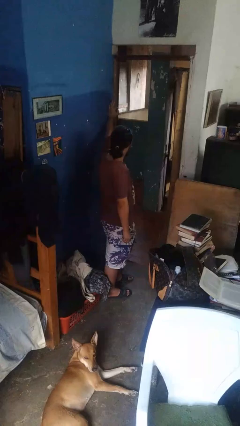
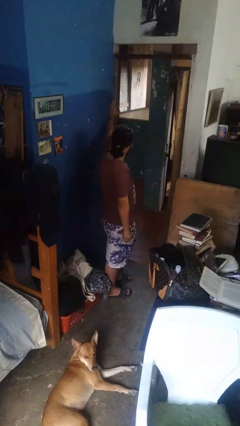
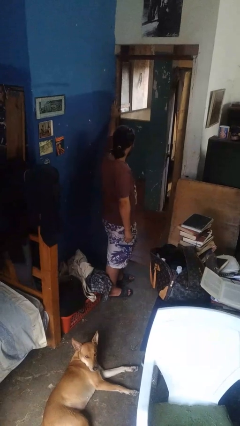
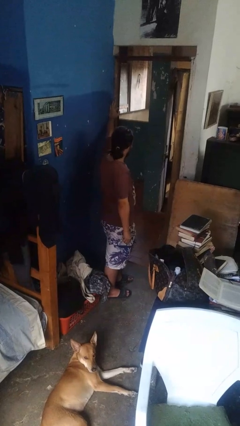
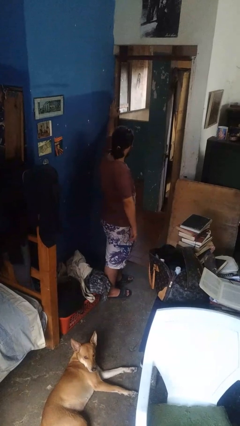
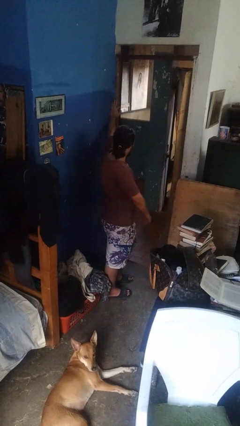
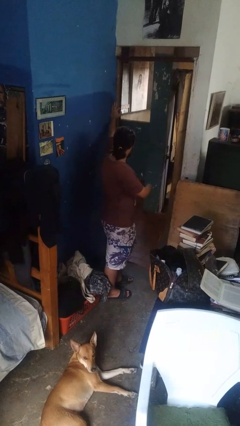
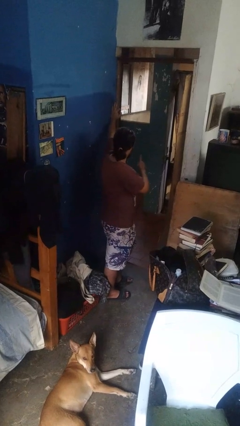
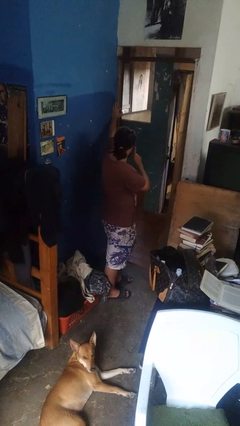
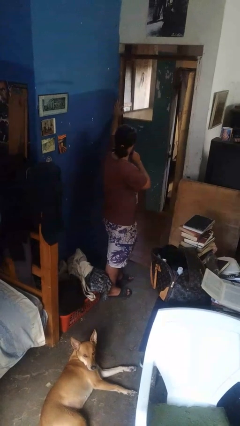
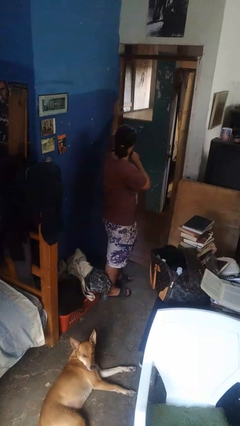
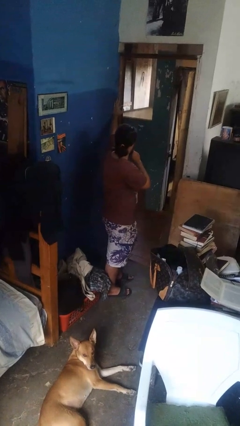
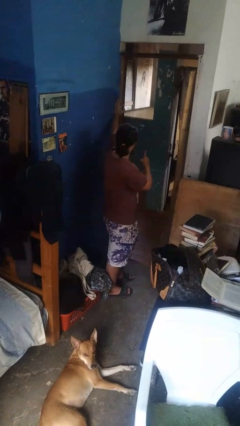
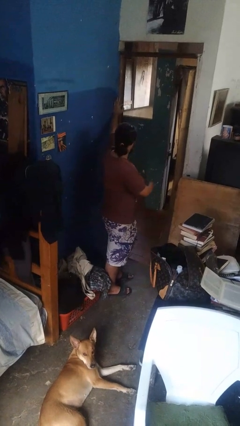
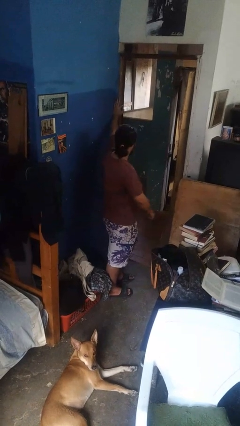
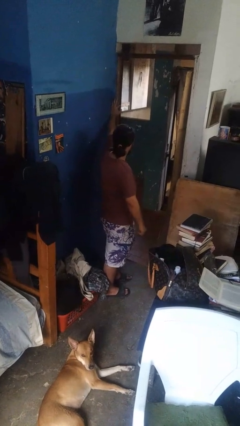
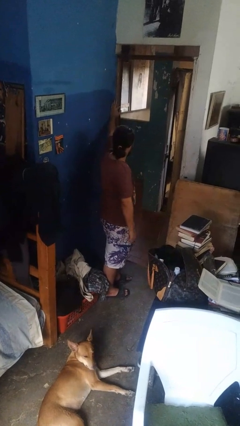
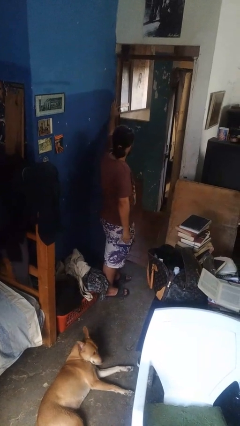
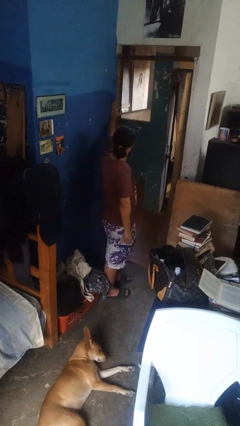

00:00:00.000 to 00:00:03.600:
person gestures be quiet

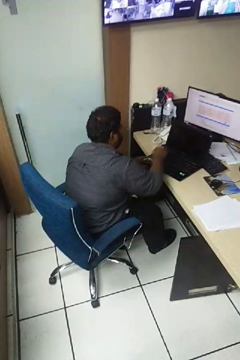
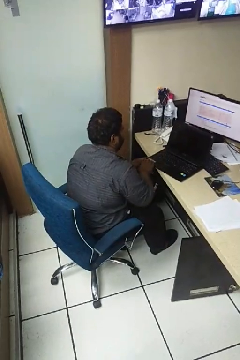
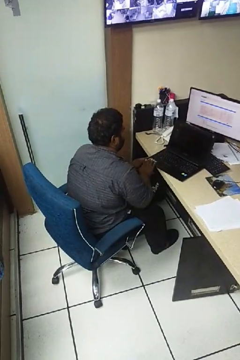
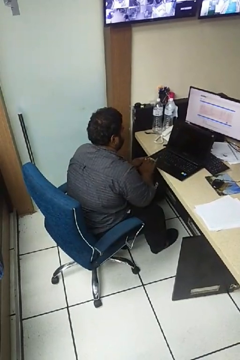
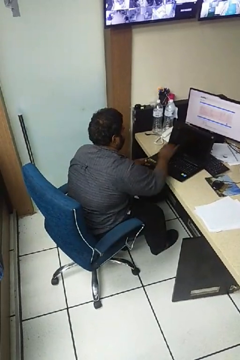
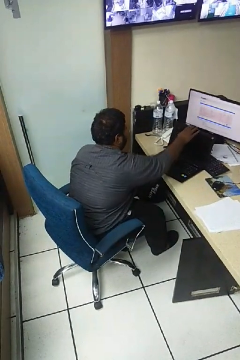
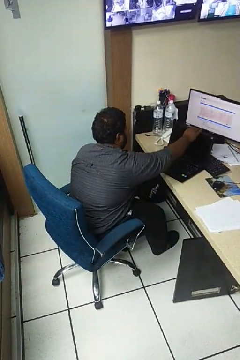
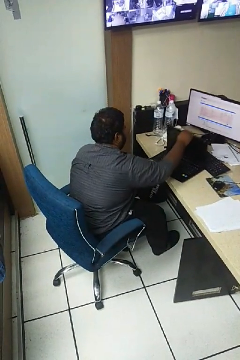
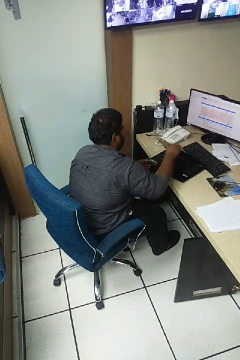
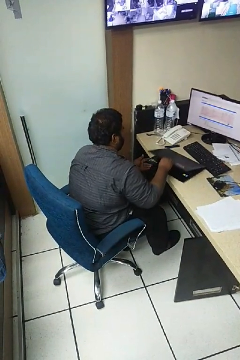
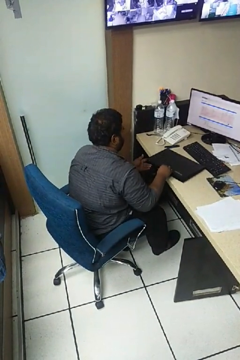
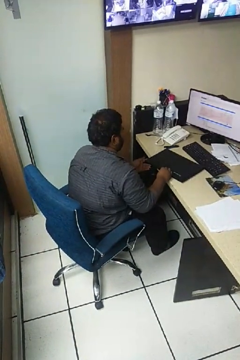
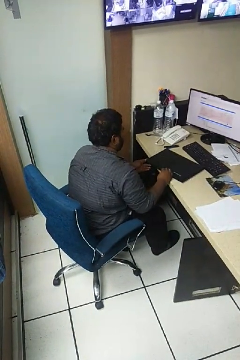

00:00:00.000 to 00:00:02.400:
person closes laptop

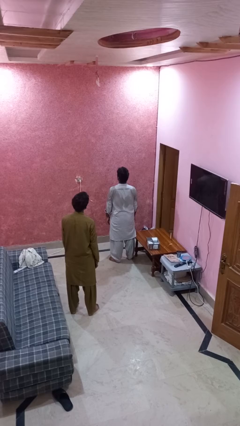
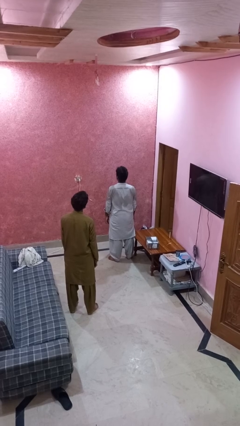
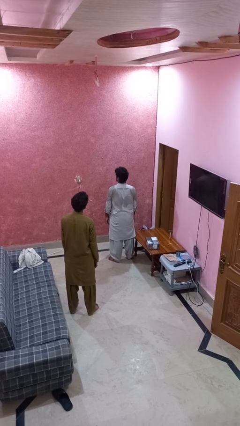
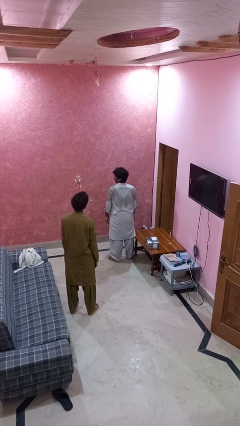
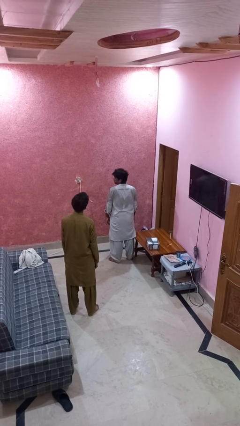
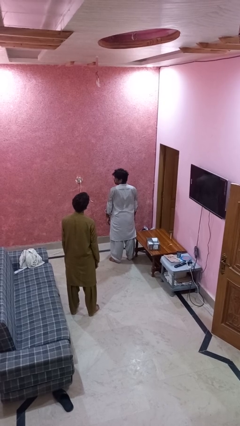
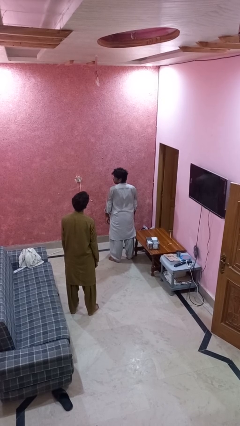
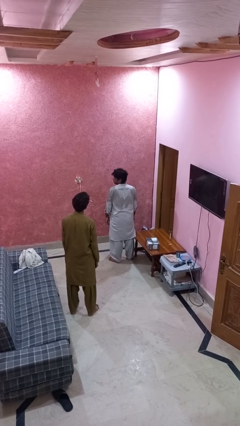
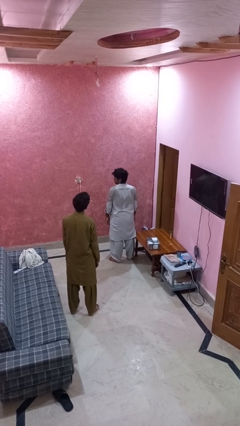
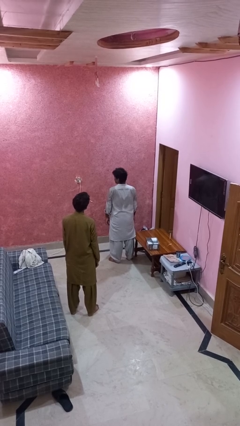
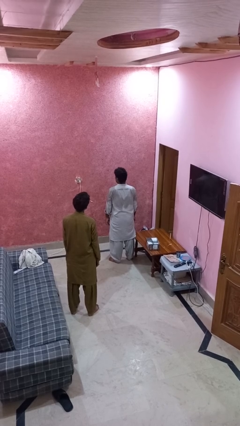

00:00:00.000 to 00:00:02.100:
person looks over shoulder

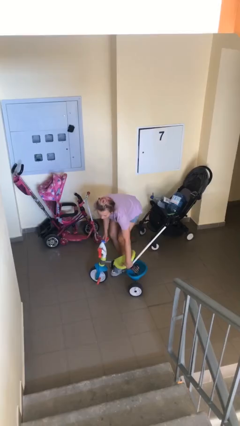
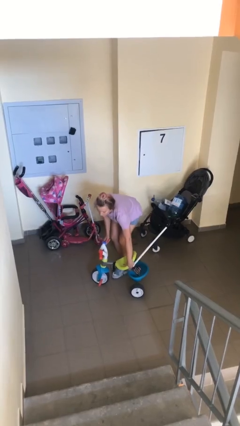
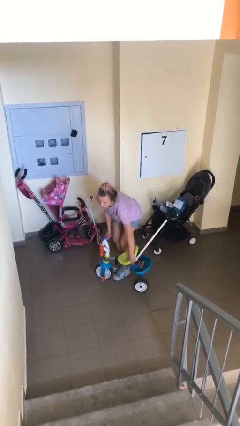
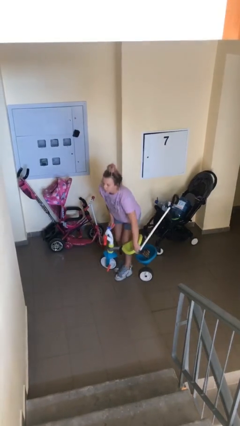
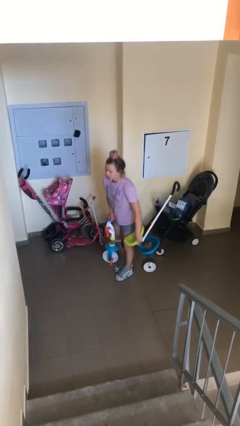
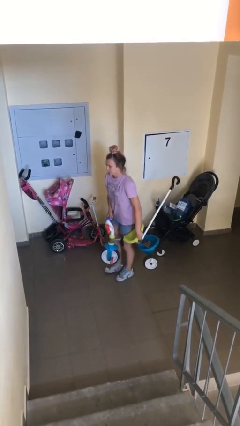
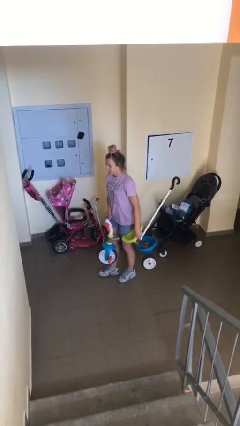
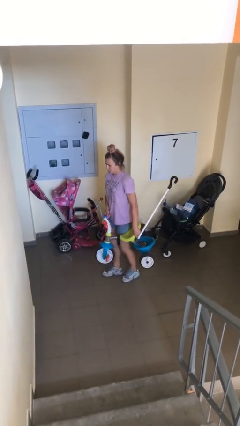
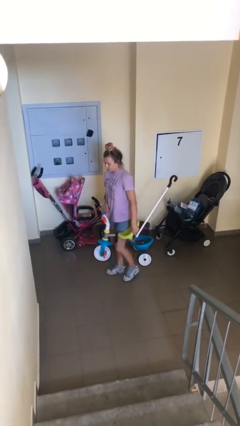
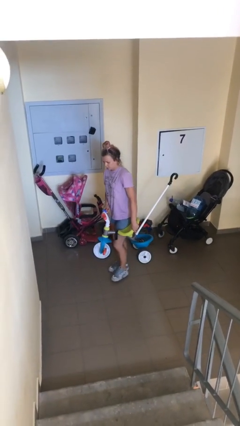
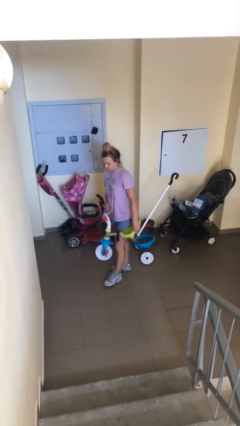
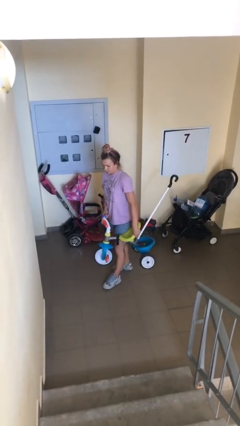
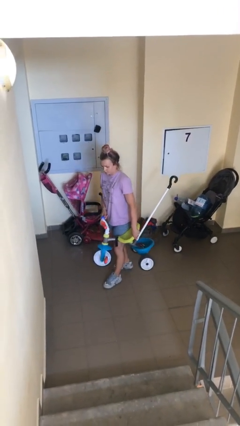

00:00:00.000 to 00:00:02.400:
person carries bicycle

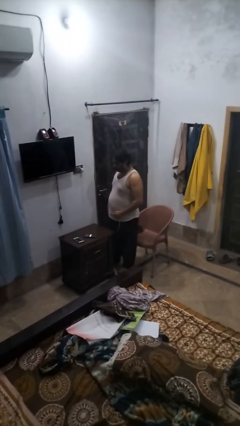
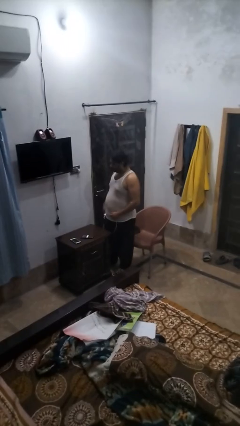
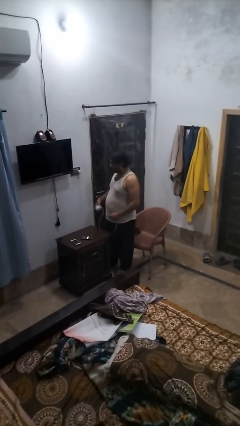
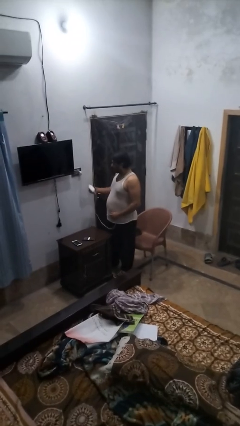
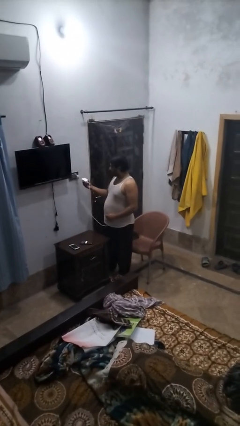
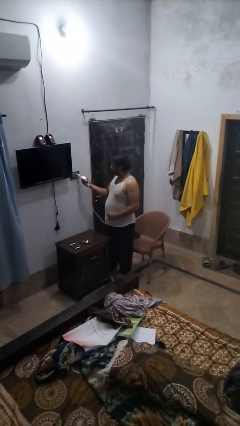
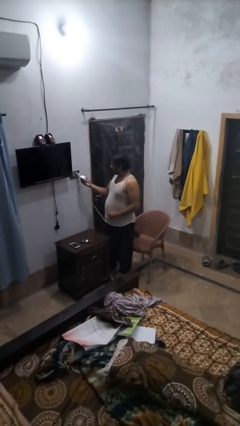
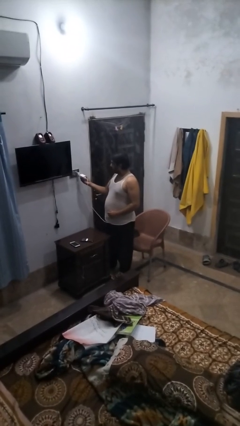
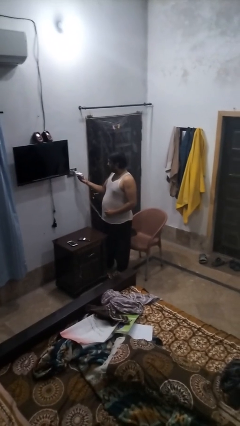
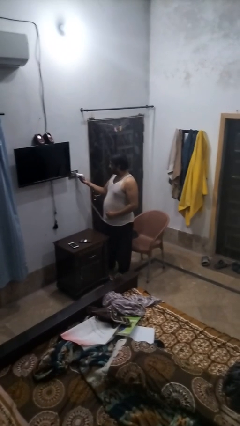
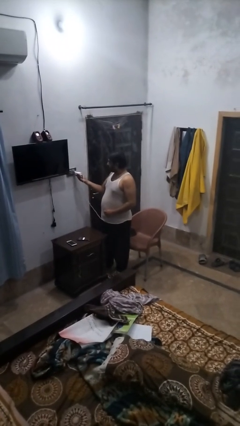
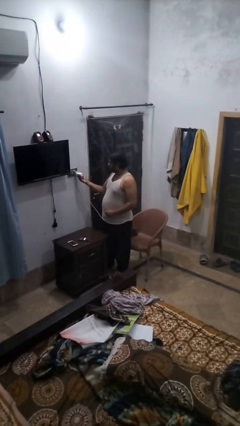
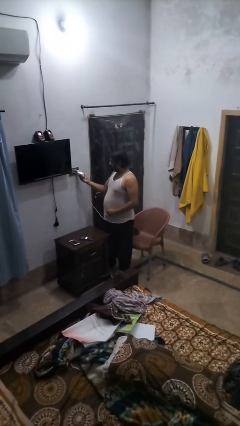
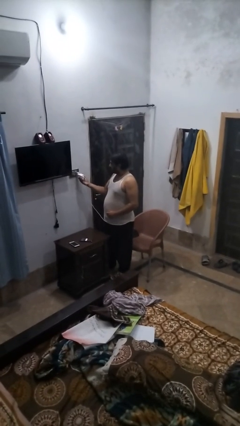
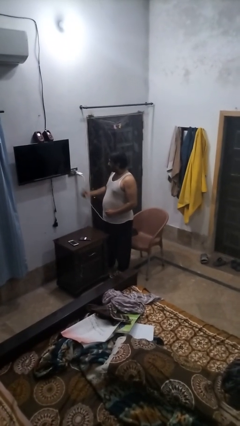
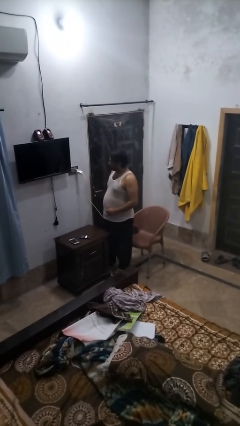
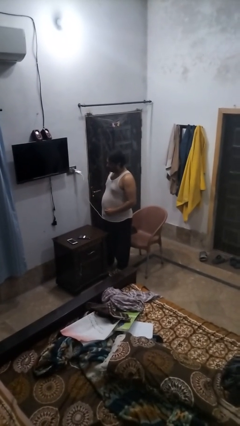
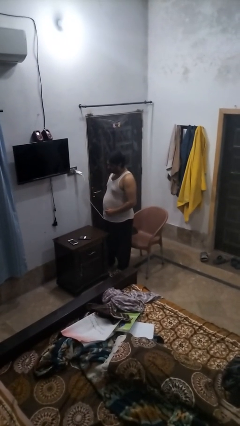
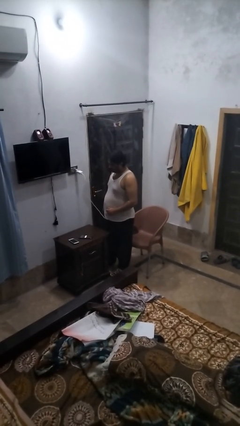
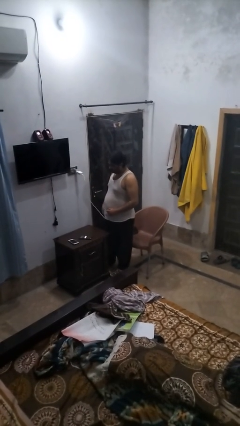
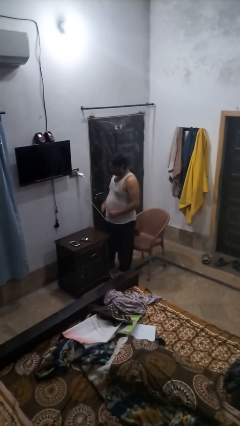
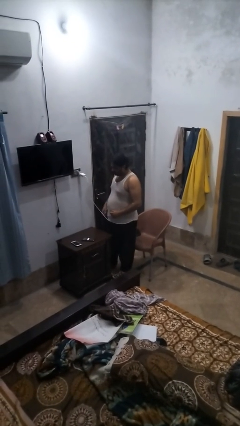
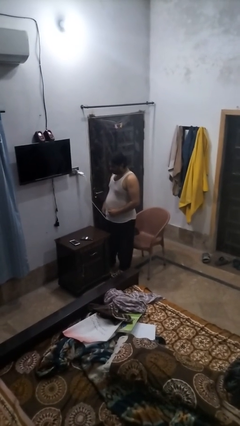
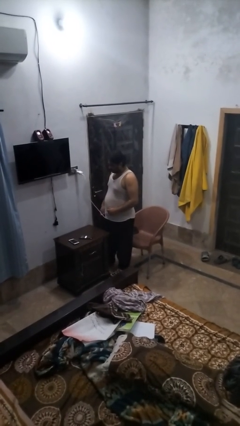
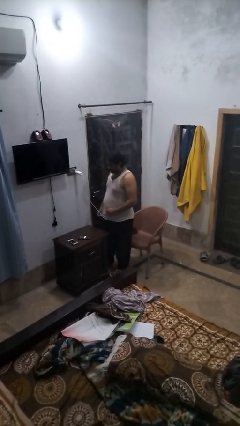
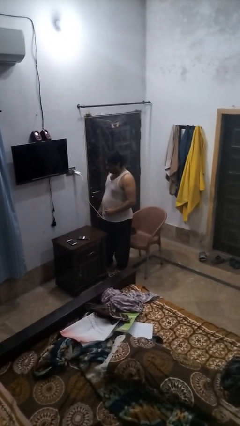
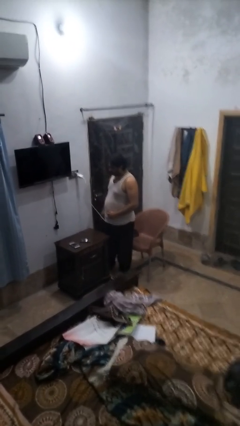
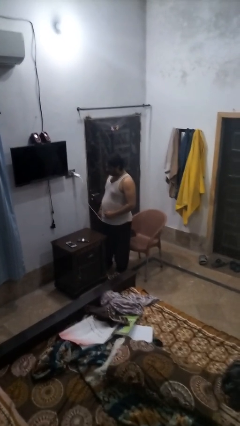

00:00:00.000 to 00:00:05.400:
person plugs into electrical socket

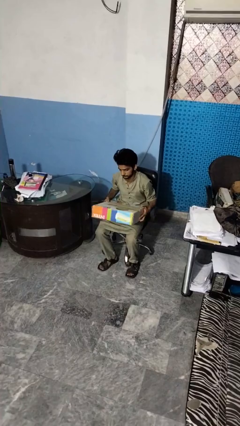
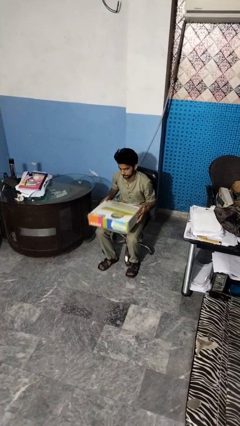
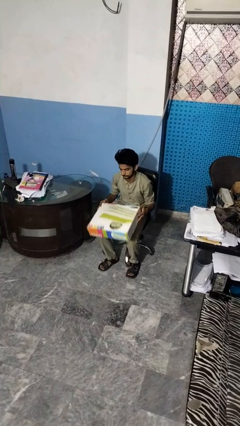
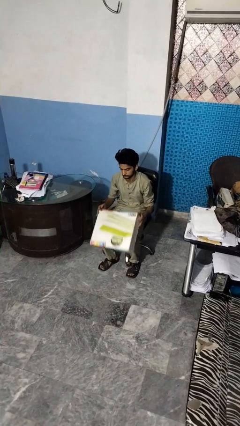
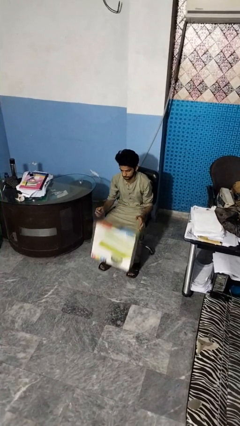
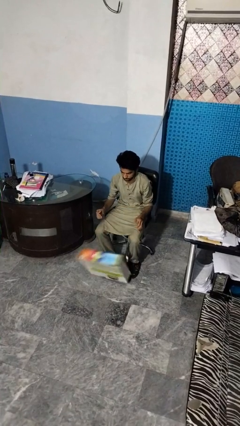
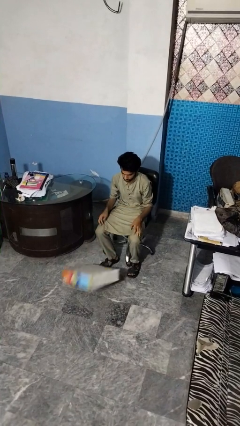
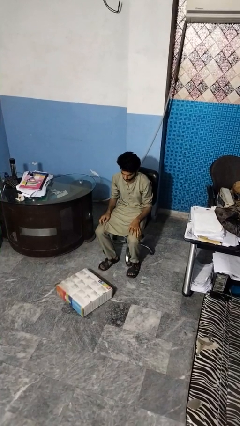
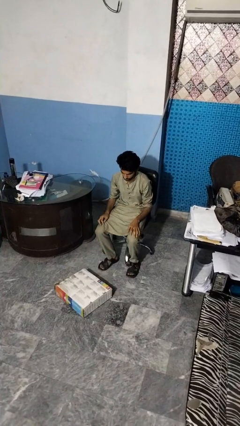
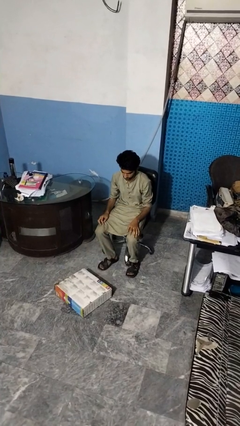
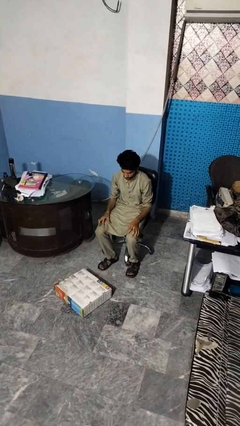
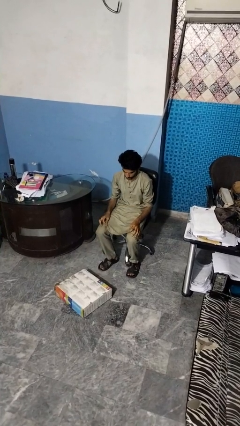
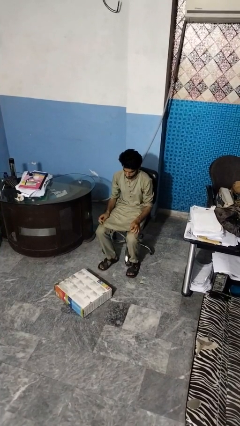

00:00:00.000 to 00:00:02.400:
person drops object
